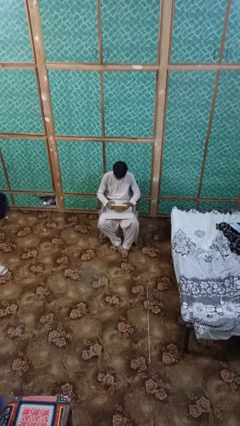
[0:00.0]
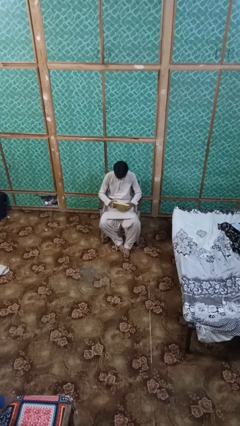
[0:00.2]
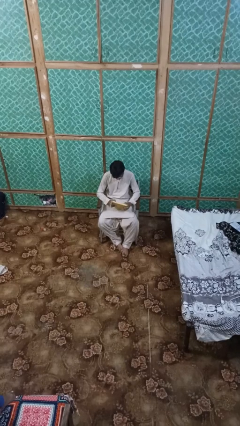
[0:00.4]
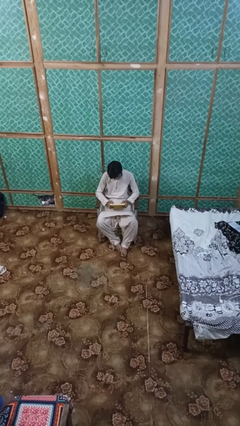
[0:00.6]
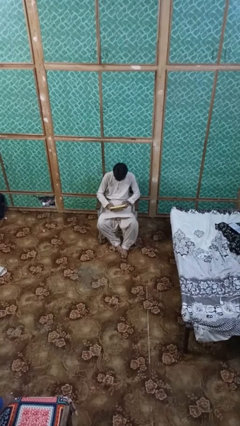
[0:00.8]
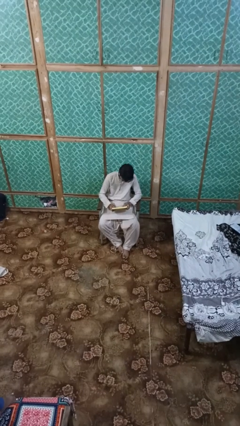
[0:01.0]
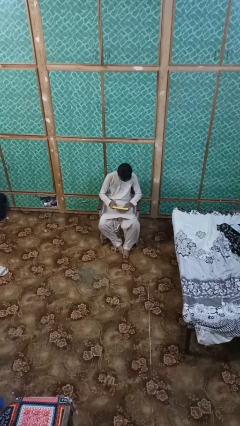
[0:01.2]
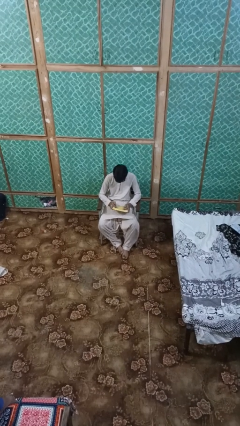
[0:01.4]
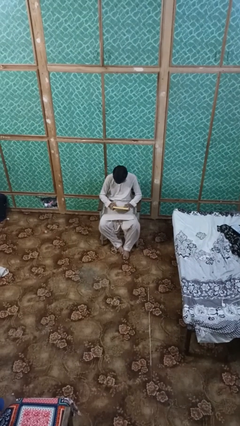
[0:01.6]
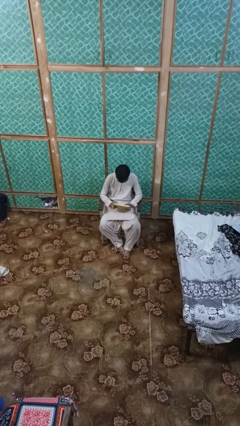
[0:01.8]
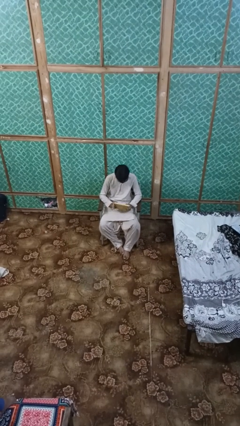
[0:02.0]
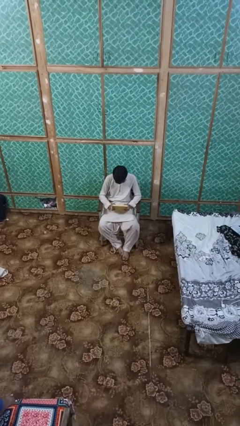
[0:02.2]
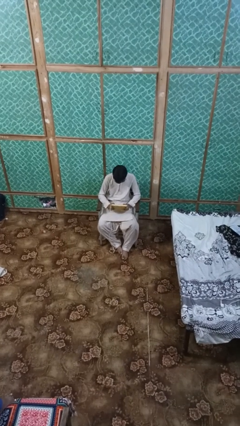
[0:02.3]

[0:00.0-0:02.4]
person interacts with handheld game

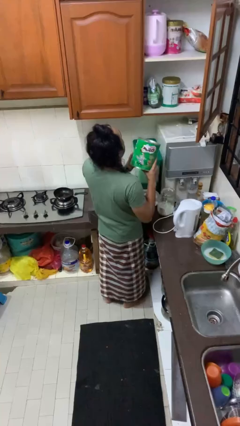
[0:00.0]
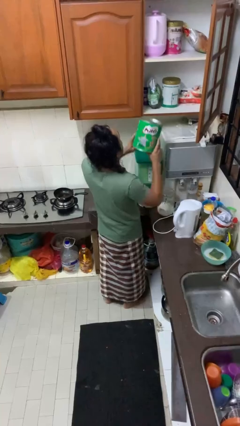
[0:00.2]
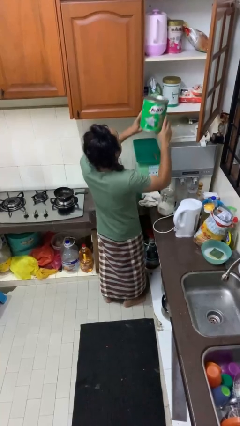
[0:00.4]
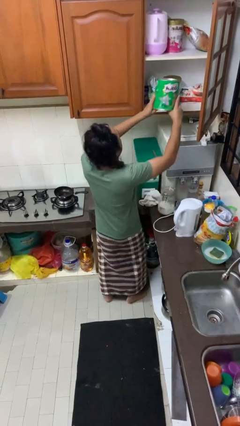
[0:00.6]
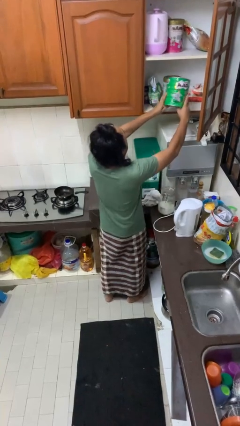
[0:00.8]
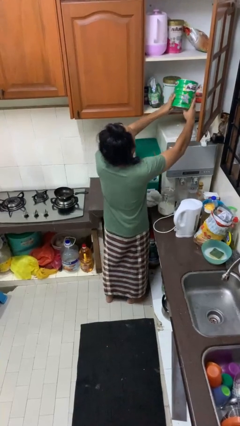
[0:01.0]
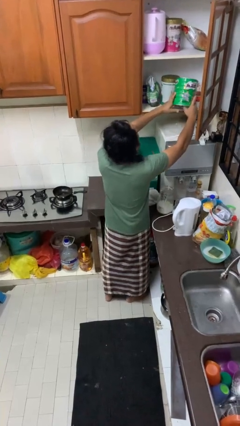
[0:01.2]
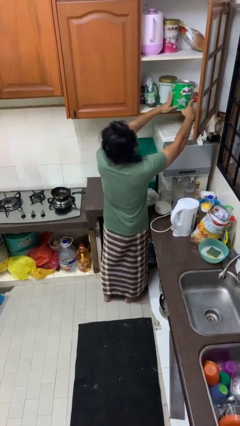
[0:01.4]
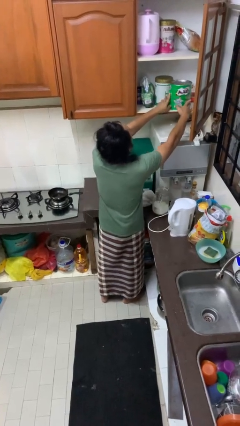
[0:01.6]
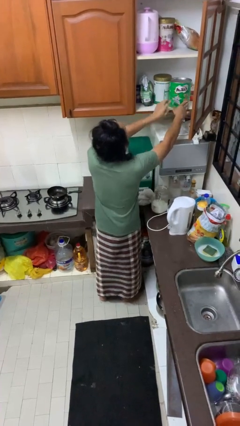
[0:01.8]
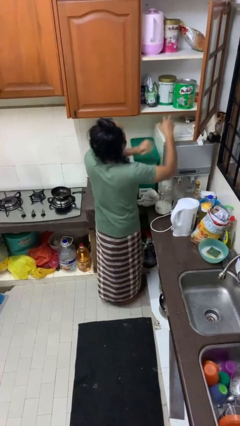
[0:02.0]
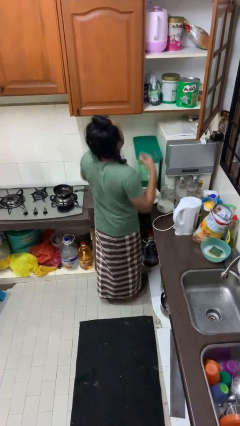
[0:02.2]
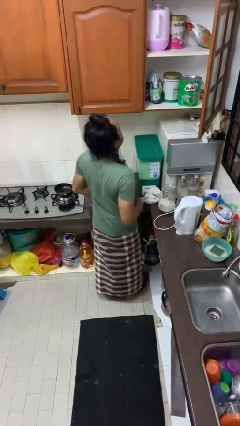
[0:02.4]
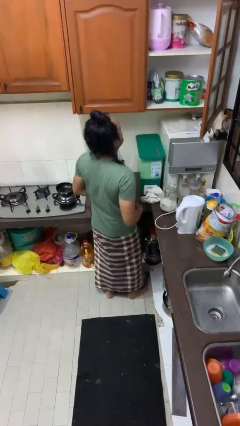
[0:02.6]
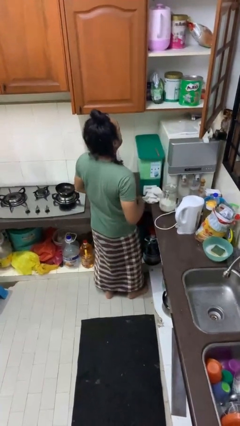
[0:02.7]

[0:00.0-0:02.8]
person puts object in cabinet

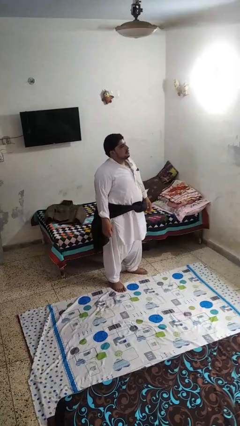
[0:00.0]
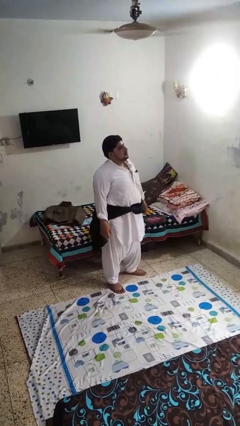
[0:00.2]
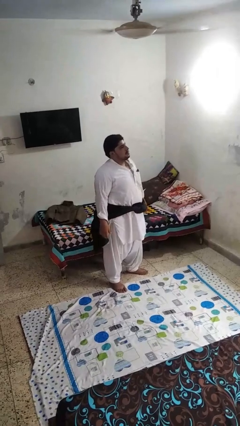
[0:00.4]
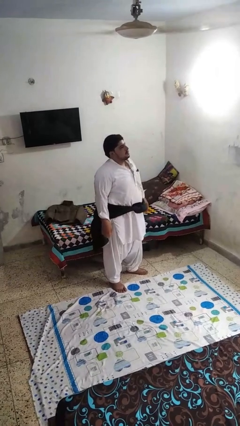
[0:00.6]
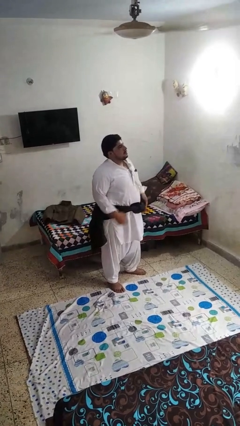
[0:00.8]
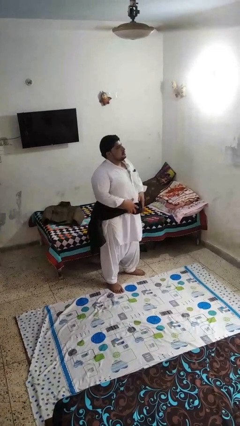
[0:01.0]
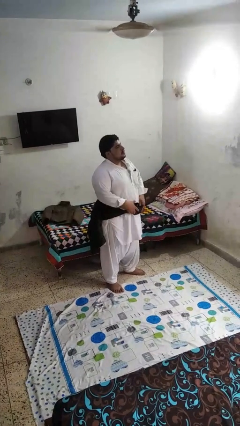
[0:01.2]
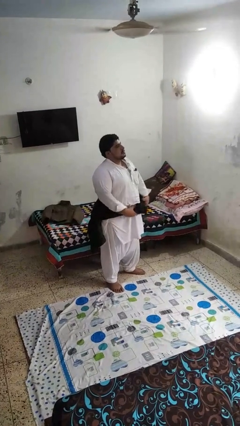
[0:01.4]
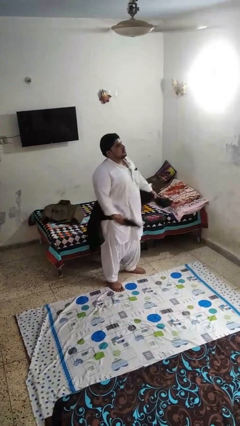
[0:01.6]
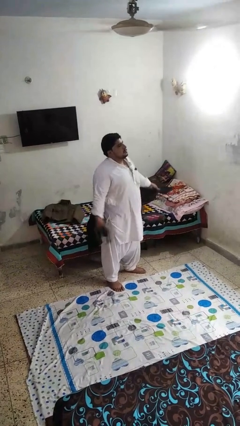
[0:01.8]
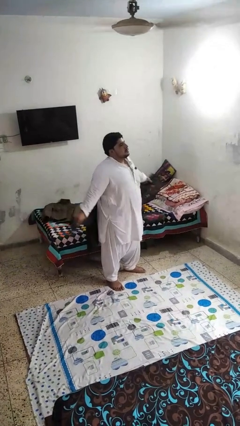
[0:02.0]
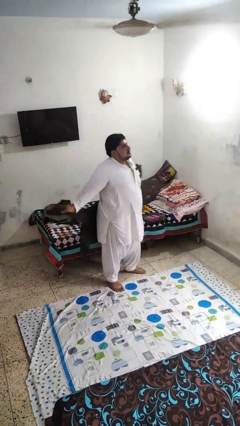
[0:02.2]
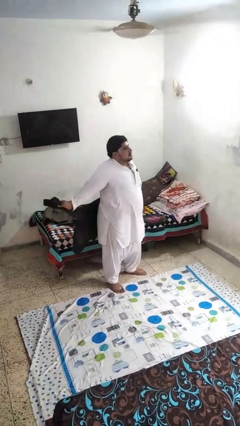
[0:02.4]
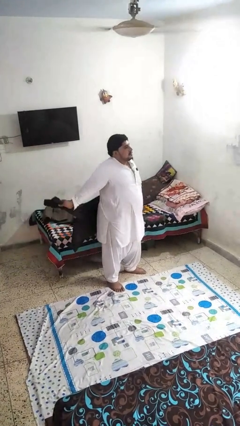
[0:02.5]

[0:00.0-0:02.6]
person unties jacket around waist

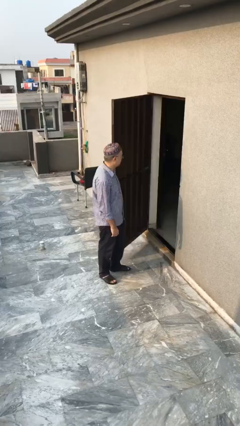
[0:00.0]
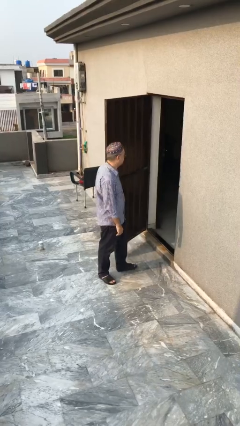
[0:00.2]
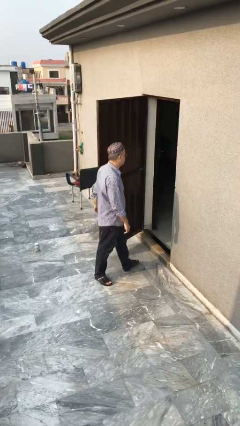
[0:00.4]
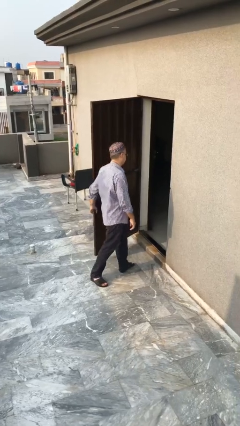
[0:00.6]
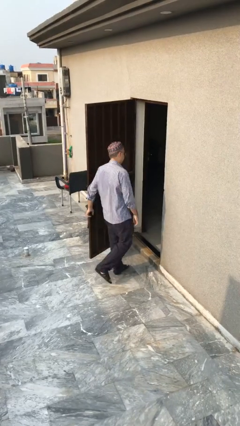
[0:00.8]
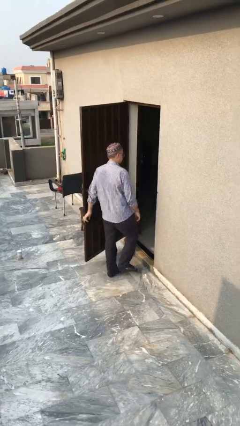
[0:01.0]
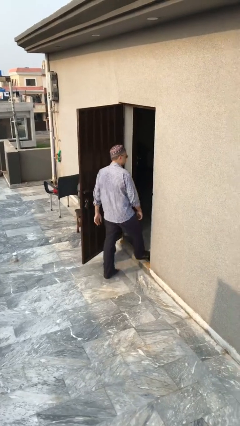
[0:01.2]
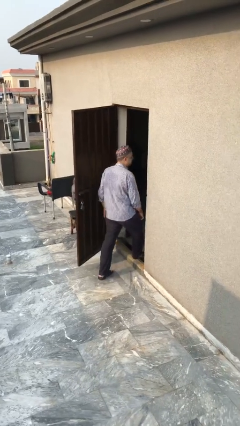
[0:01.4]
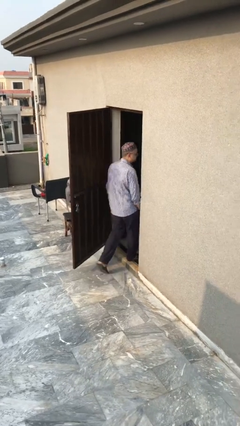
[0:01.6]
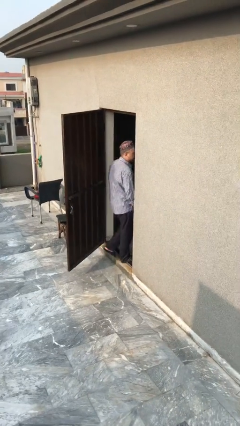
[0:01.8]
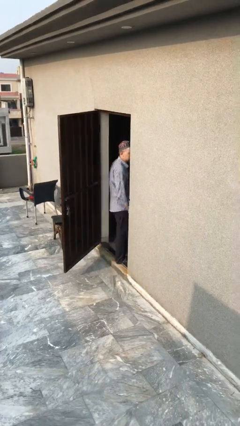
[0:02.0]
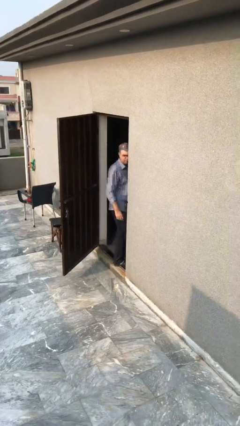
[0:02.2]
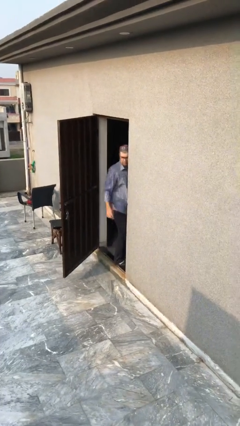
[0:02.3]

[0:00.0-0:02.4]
person exits scene through structure

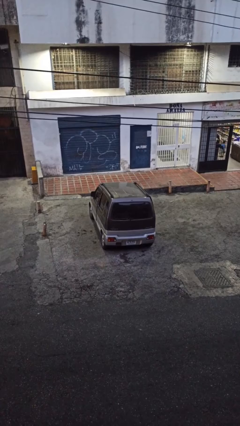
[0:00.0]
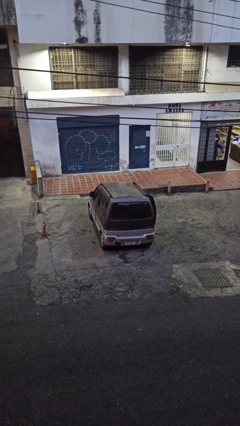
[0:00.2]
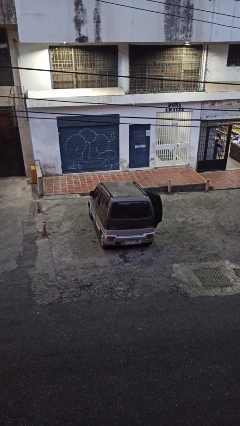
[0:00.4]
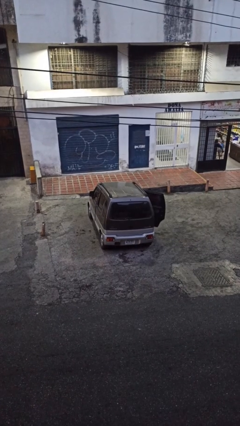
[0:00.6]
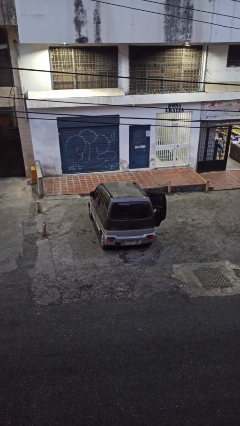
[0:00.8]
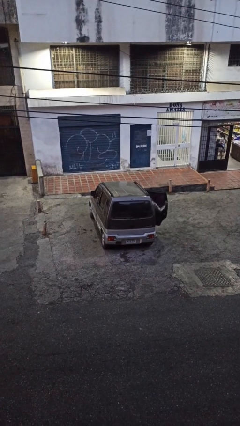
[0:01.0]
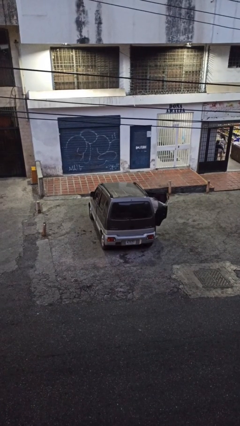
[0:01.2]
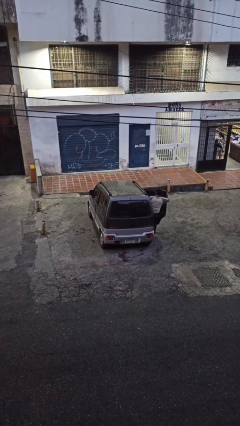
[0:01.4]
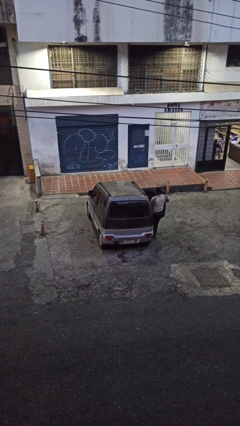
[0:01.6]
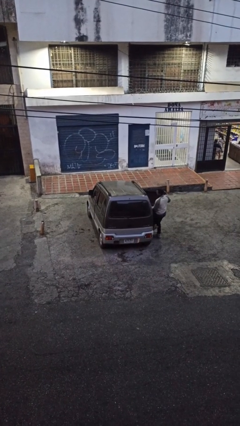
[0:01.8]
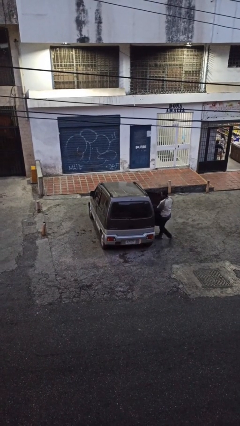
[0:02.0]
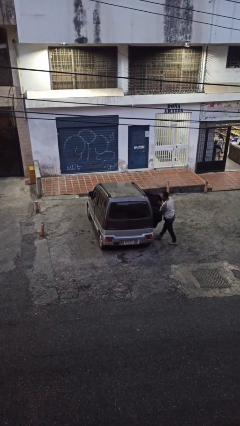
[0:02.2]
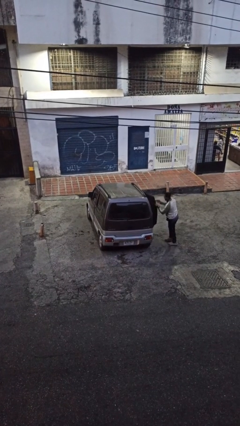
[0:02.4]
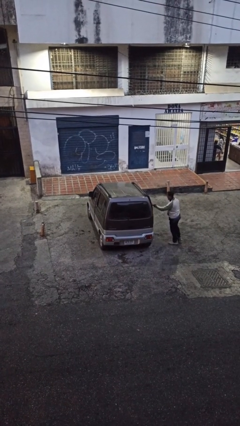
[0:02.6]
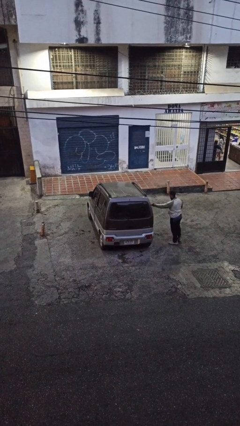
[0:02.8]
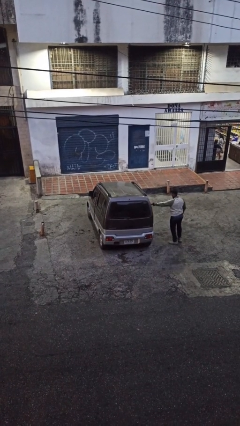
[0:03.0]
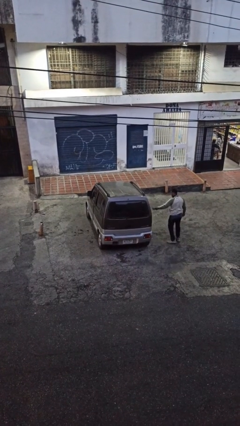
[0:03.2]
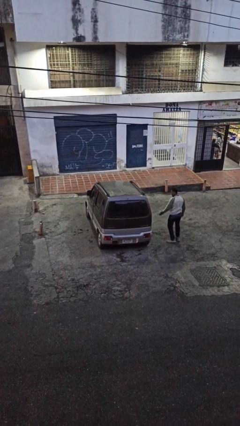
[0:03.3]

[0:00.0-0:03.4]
car drops off person

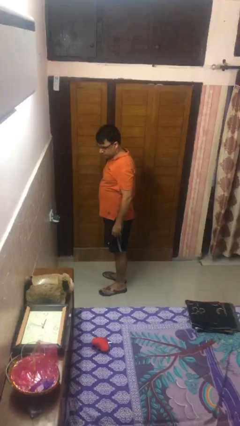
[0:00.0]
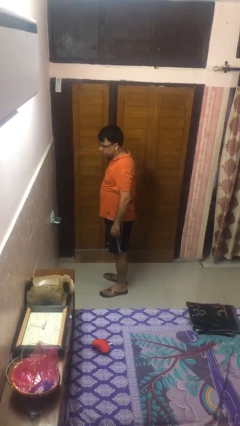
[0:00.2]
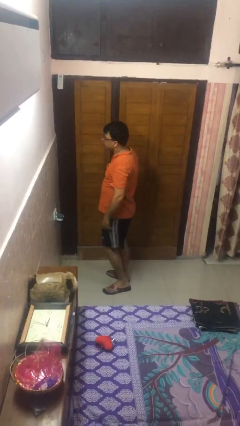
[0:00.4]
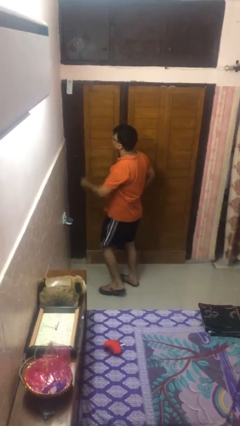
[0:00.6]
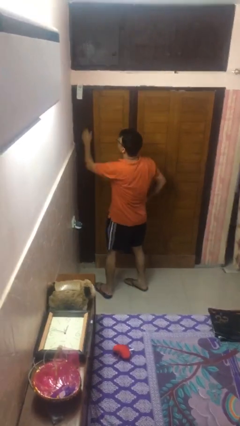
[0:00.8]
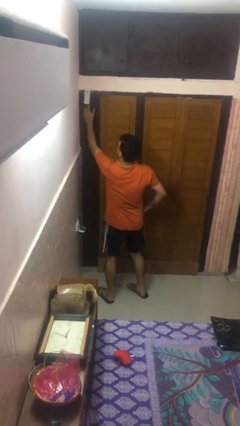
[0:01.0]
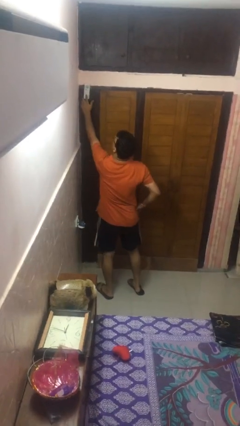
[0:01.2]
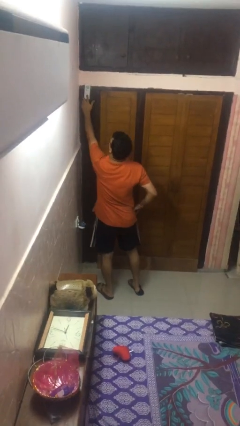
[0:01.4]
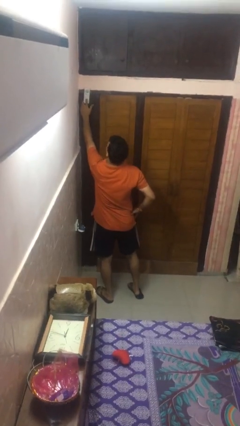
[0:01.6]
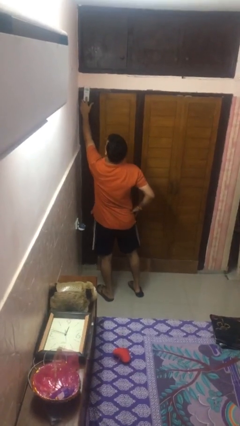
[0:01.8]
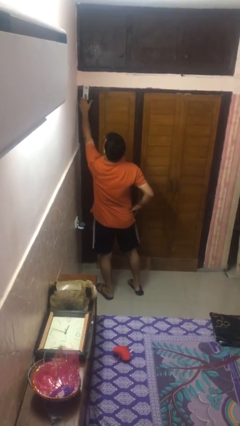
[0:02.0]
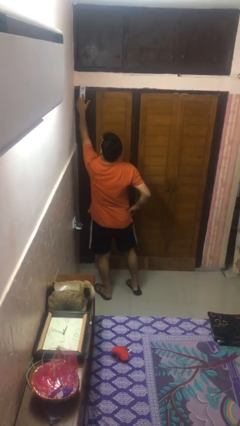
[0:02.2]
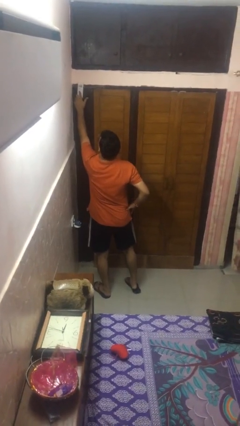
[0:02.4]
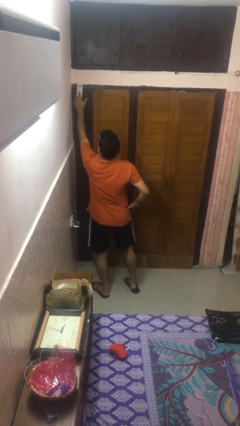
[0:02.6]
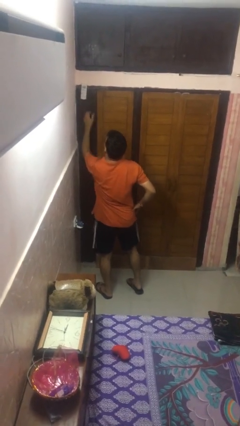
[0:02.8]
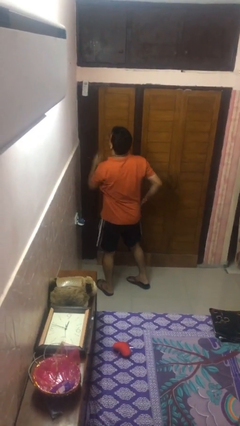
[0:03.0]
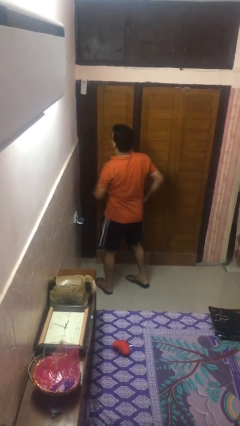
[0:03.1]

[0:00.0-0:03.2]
person adjusts thermostat

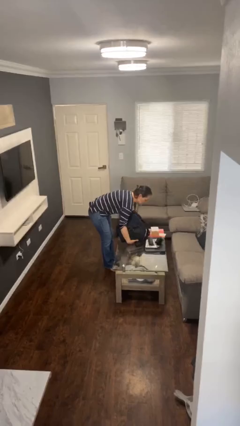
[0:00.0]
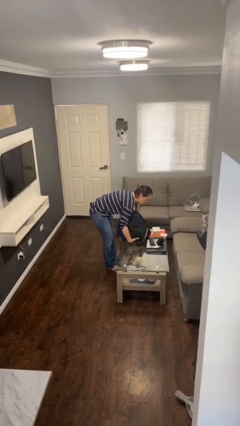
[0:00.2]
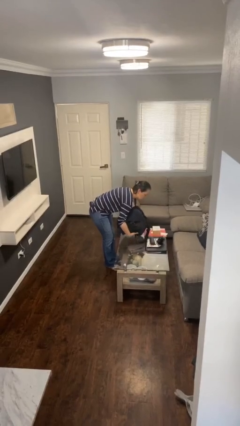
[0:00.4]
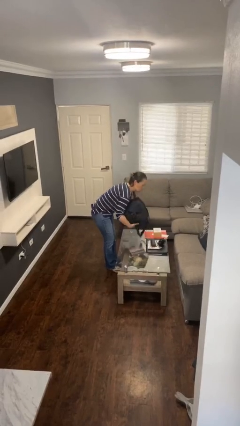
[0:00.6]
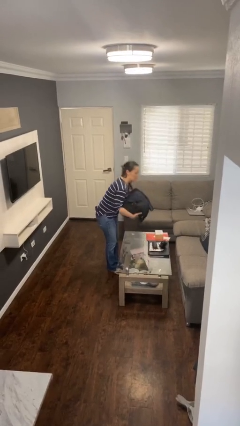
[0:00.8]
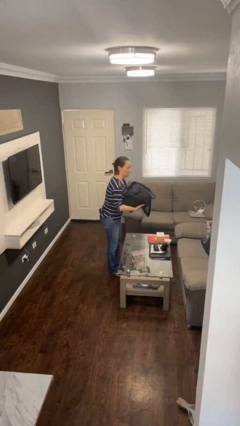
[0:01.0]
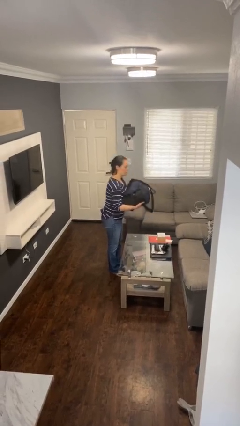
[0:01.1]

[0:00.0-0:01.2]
person picks up object from table
